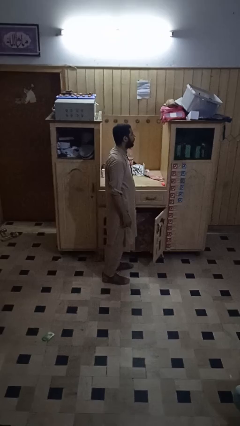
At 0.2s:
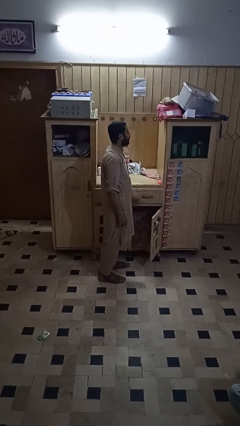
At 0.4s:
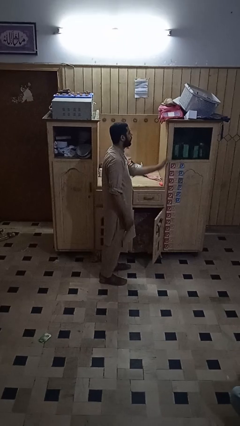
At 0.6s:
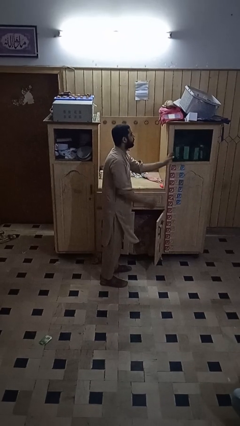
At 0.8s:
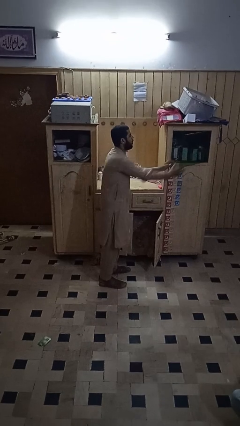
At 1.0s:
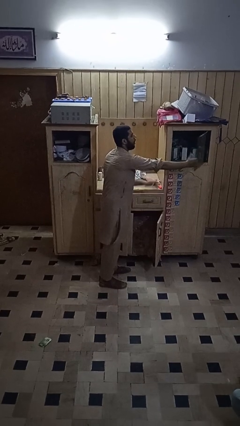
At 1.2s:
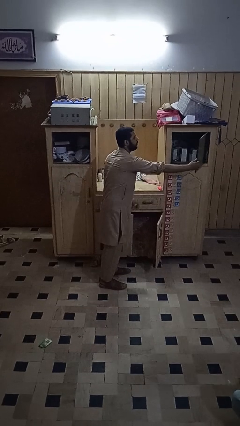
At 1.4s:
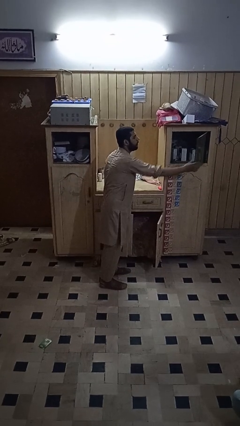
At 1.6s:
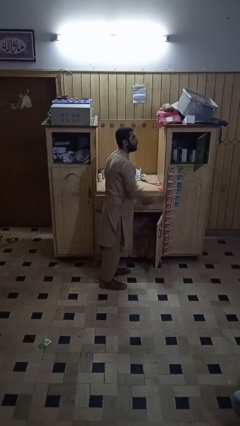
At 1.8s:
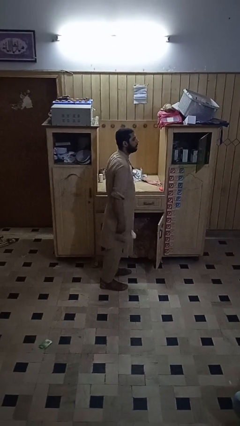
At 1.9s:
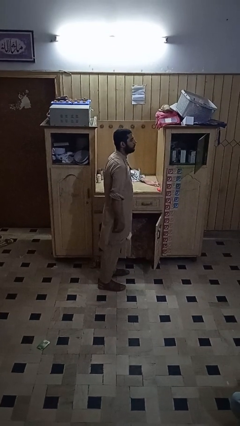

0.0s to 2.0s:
person closes cabinet

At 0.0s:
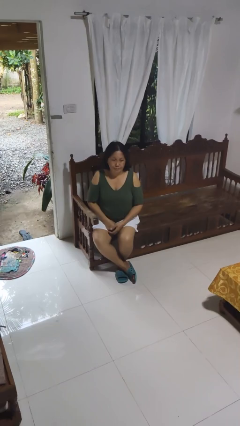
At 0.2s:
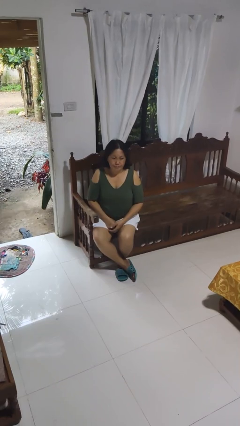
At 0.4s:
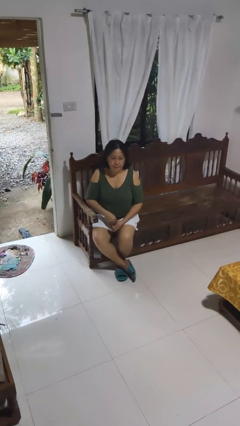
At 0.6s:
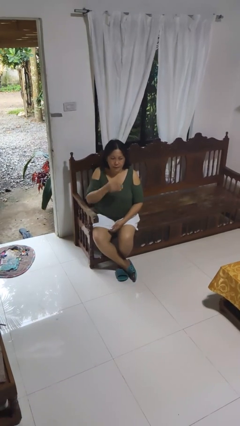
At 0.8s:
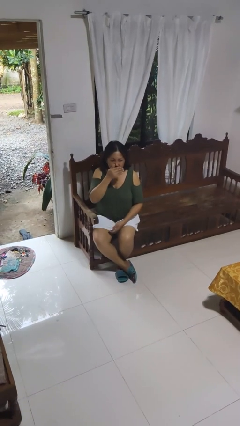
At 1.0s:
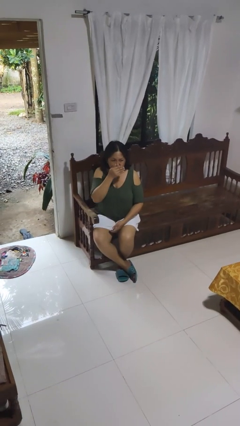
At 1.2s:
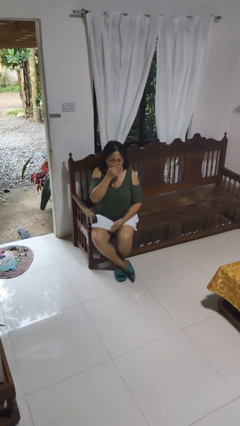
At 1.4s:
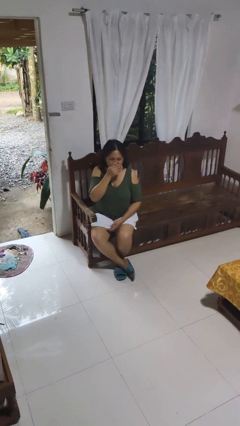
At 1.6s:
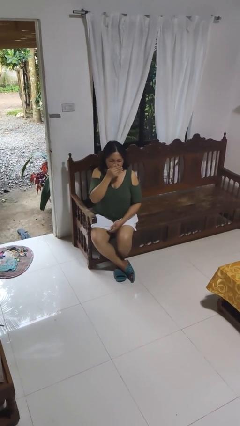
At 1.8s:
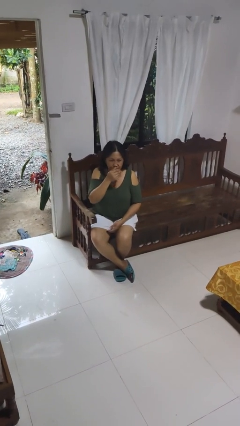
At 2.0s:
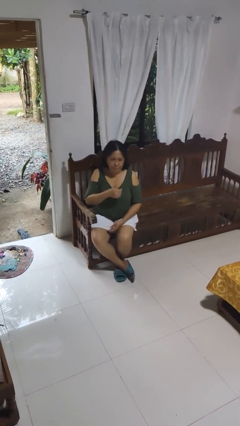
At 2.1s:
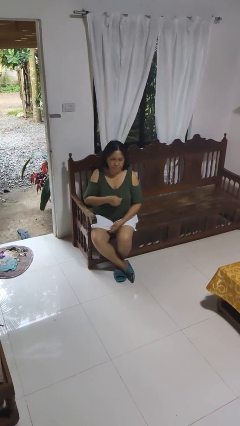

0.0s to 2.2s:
person sneezes into hand

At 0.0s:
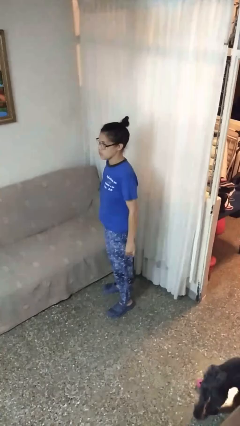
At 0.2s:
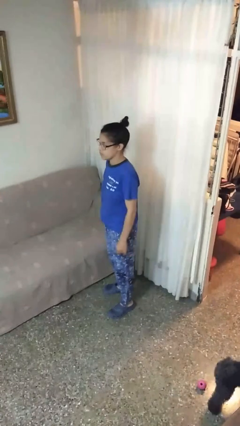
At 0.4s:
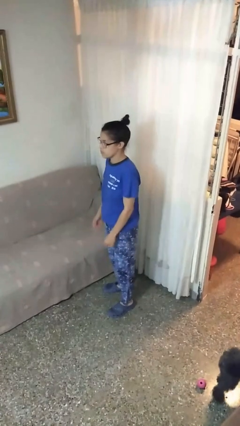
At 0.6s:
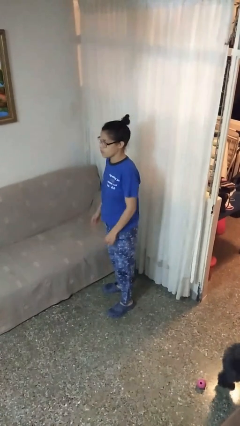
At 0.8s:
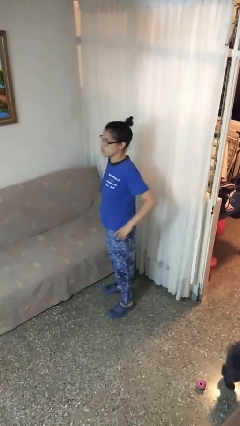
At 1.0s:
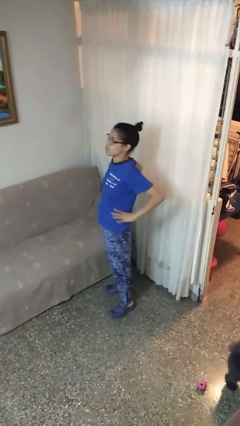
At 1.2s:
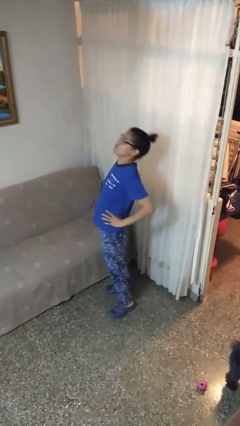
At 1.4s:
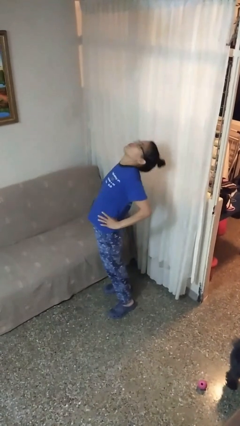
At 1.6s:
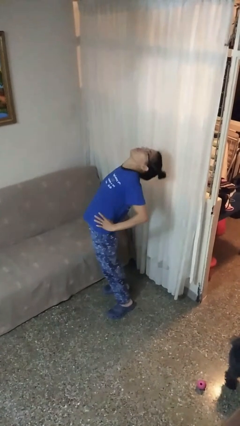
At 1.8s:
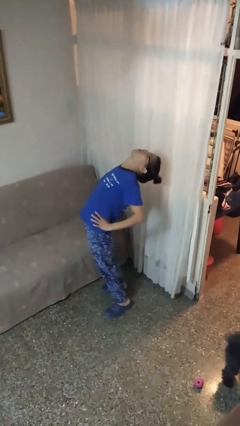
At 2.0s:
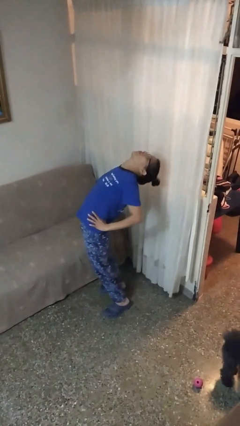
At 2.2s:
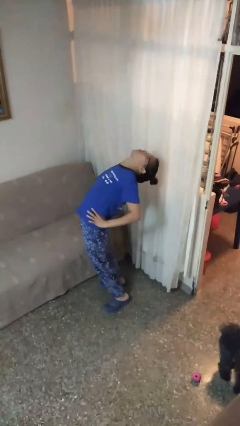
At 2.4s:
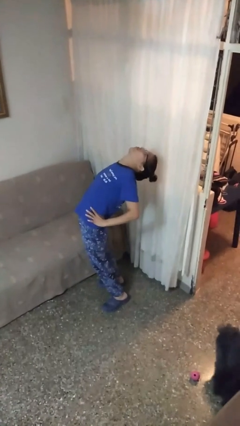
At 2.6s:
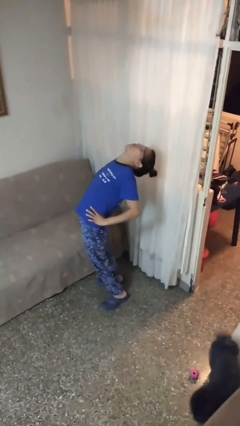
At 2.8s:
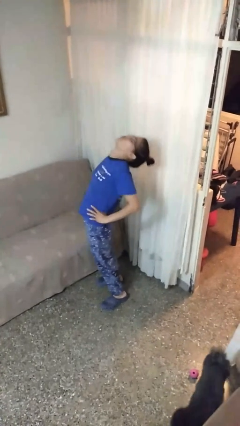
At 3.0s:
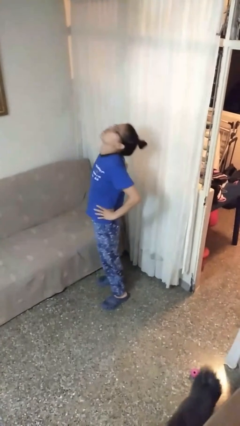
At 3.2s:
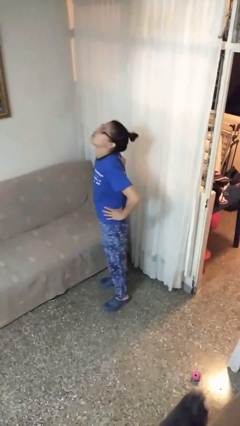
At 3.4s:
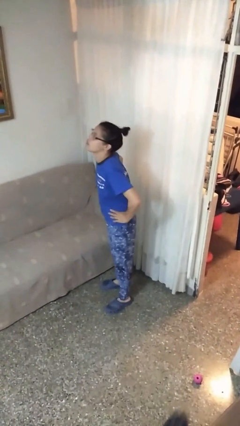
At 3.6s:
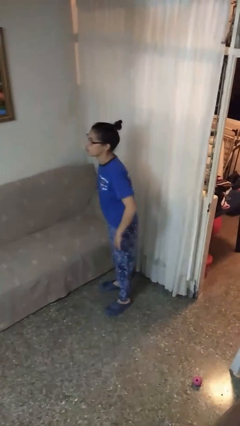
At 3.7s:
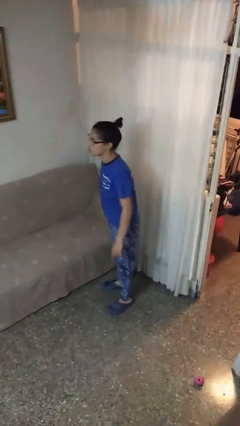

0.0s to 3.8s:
person stretches back

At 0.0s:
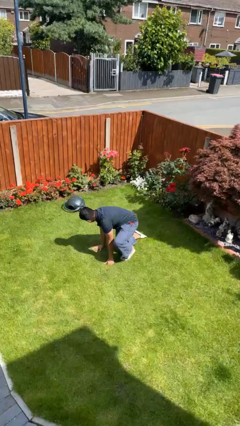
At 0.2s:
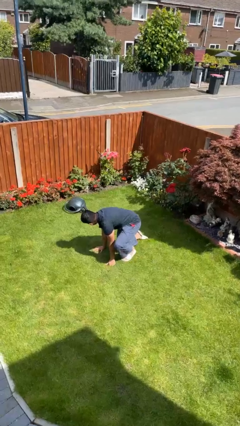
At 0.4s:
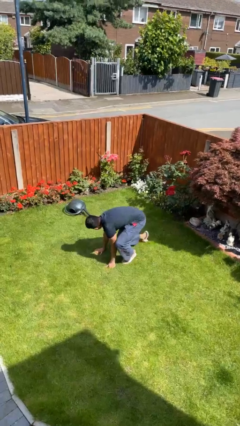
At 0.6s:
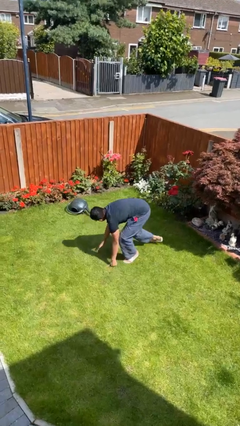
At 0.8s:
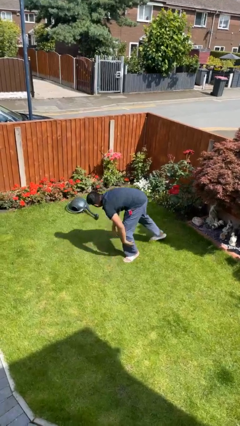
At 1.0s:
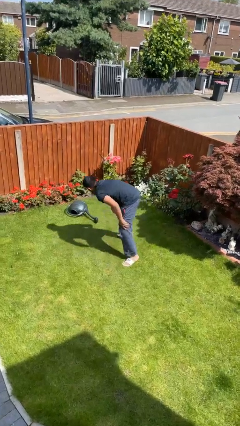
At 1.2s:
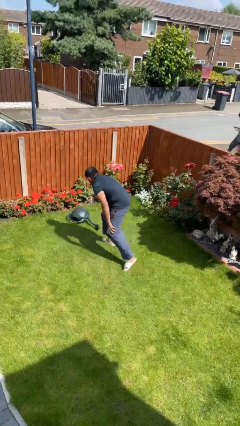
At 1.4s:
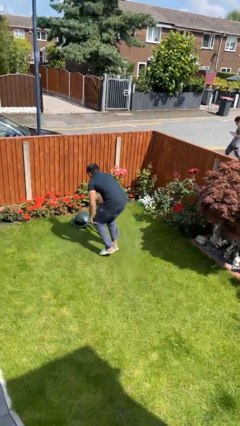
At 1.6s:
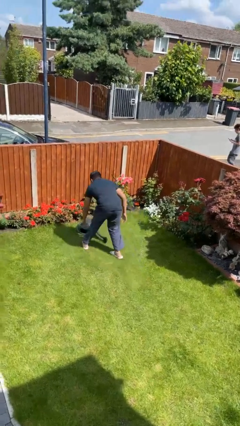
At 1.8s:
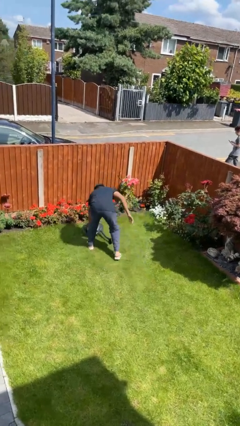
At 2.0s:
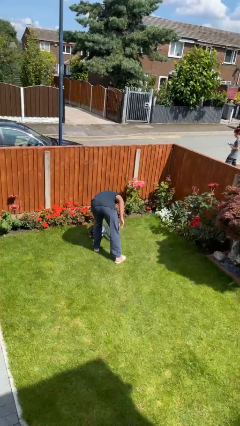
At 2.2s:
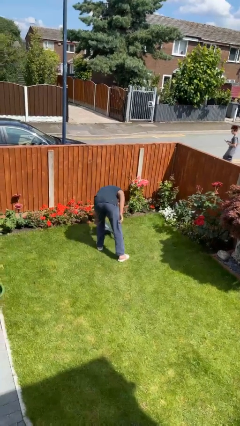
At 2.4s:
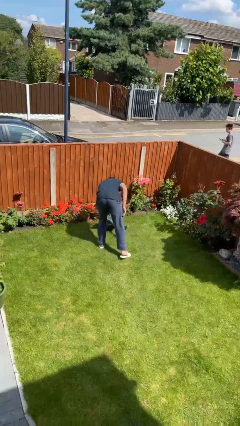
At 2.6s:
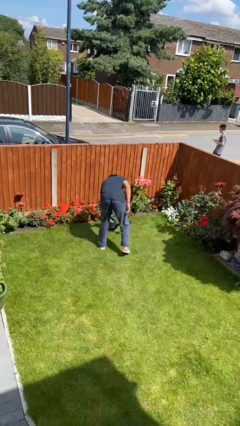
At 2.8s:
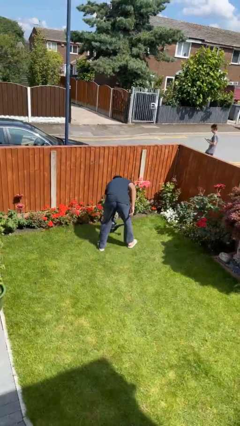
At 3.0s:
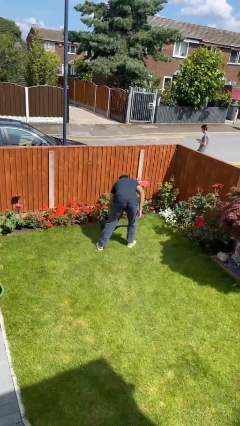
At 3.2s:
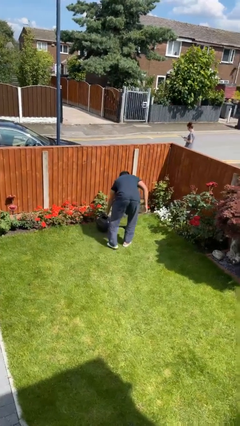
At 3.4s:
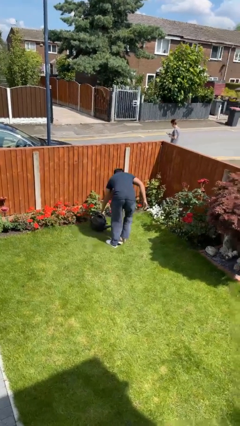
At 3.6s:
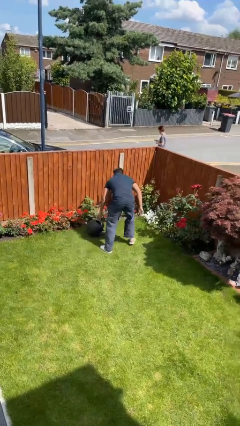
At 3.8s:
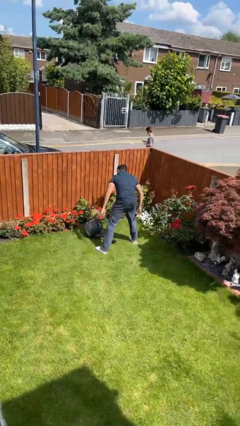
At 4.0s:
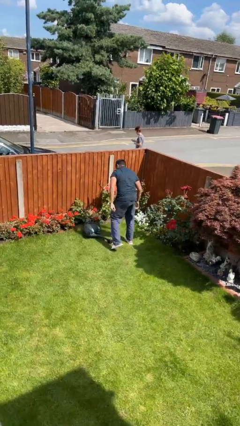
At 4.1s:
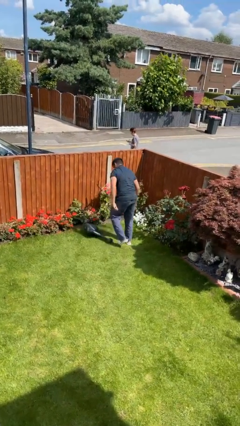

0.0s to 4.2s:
person stands up from floor

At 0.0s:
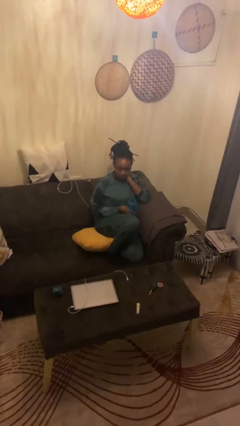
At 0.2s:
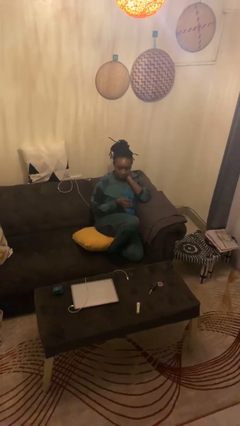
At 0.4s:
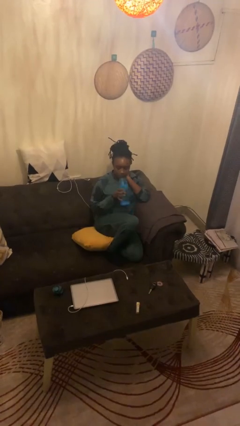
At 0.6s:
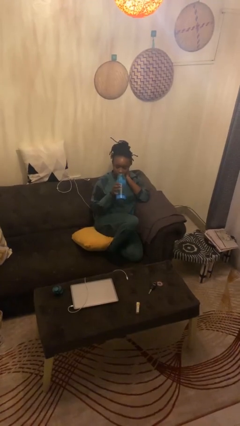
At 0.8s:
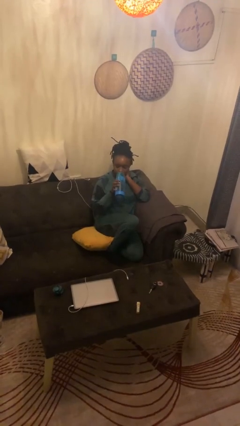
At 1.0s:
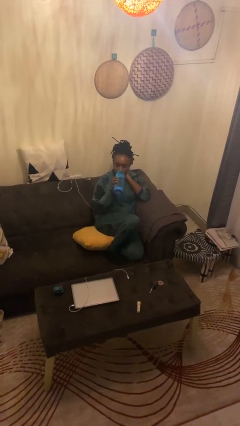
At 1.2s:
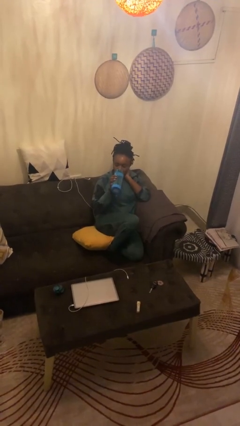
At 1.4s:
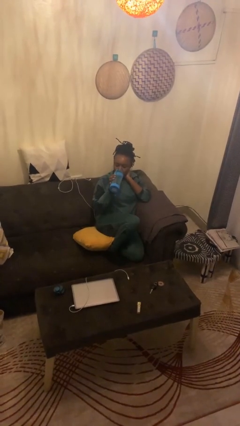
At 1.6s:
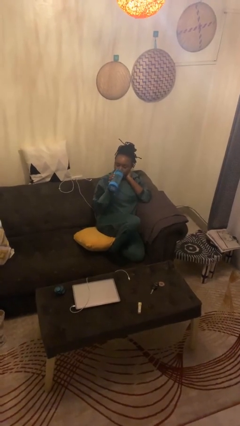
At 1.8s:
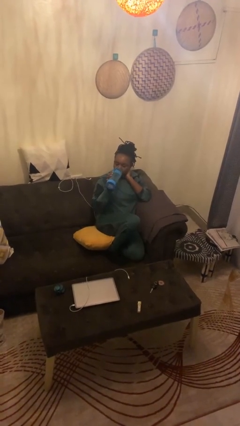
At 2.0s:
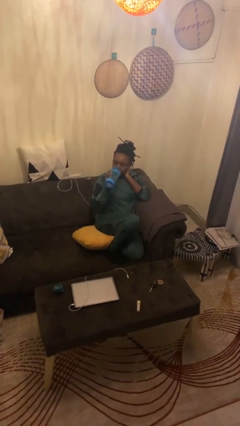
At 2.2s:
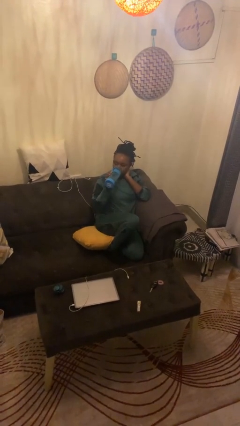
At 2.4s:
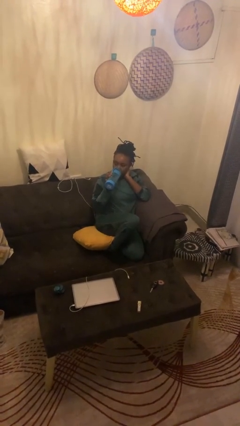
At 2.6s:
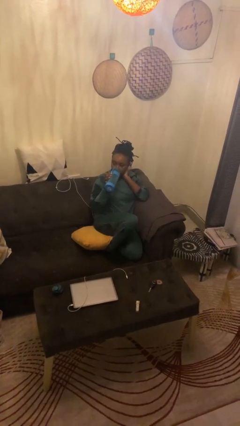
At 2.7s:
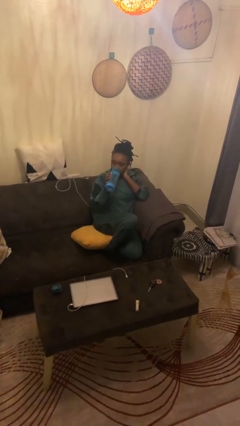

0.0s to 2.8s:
person drinks from bottle

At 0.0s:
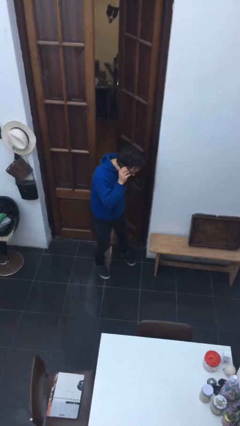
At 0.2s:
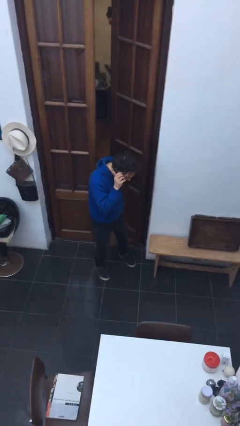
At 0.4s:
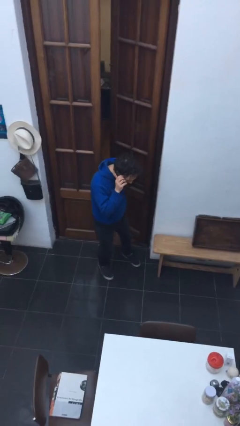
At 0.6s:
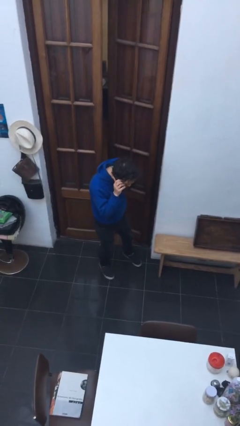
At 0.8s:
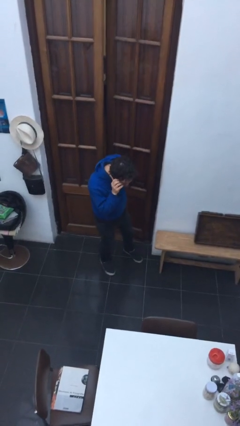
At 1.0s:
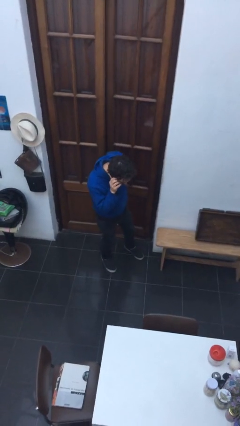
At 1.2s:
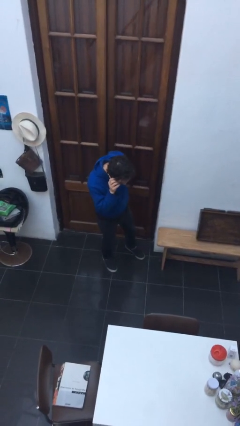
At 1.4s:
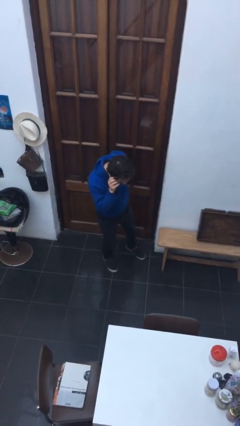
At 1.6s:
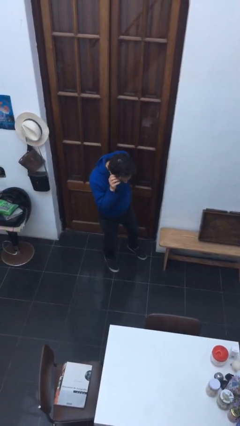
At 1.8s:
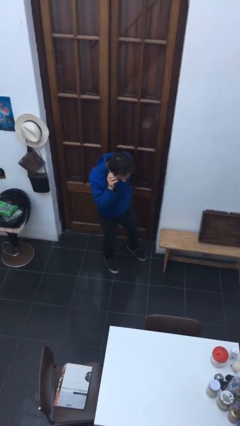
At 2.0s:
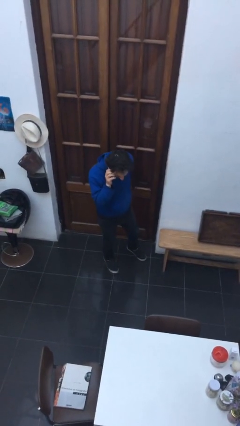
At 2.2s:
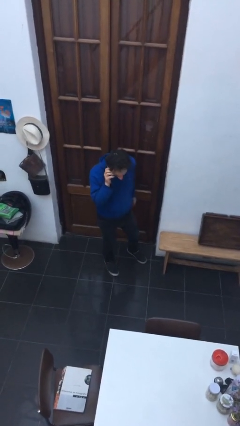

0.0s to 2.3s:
person closes facility door

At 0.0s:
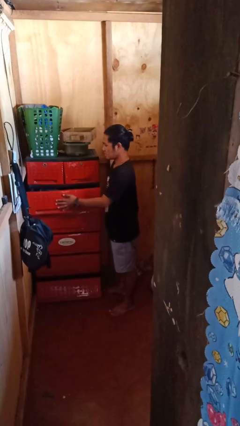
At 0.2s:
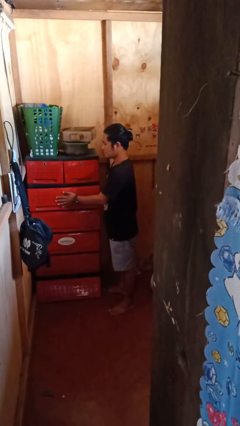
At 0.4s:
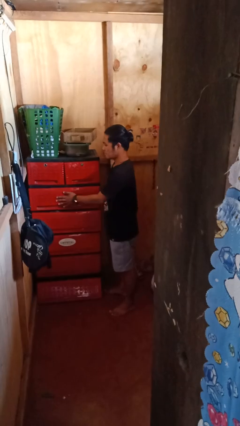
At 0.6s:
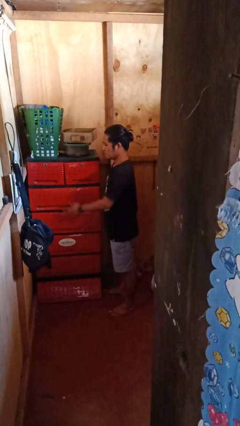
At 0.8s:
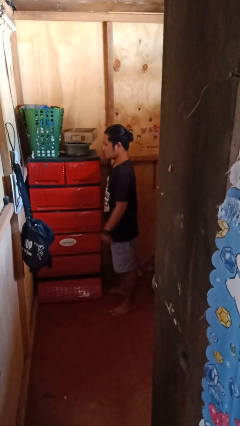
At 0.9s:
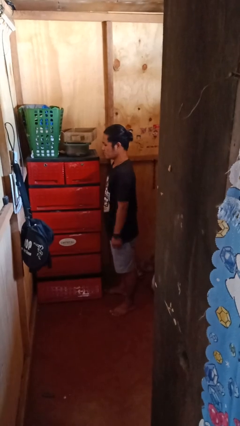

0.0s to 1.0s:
person closes dresser drawer
